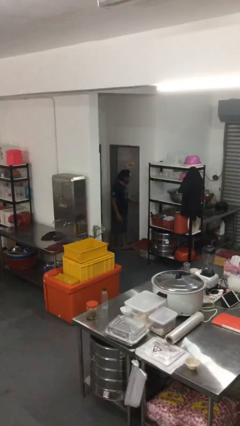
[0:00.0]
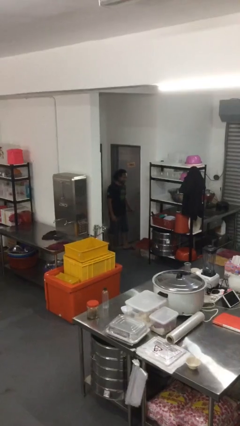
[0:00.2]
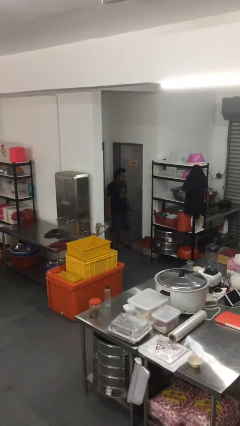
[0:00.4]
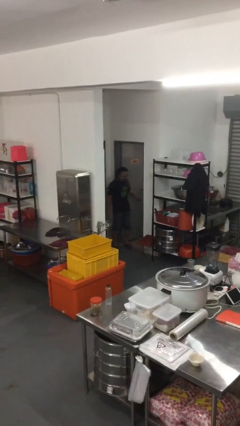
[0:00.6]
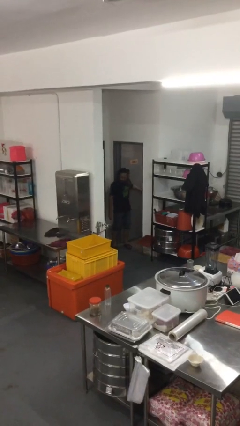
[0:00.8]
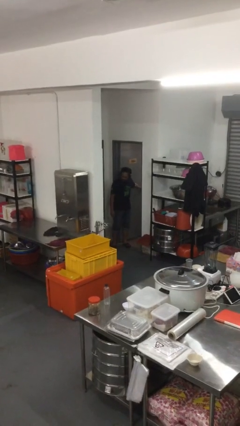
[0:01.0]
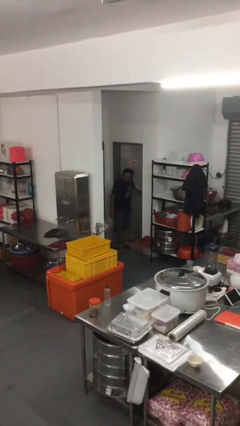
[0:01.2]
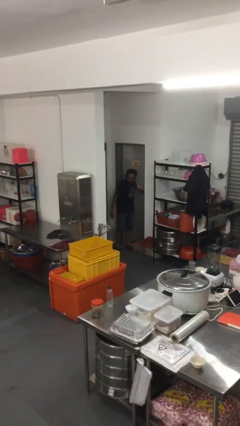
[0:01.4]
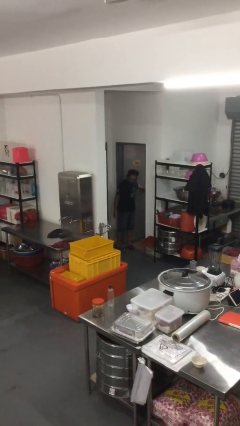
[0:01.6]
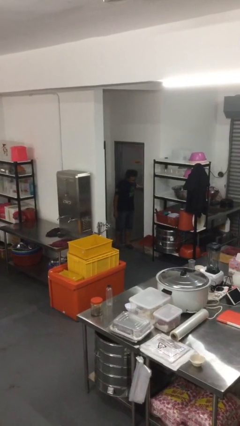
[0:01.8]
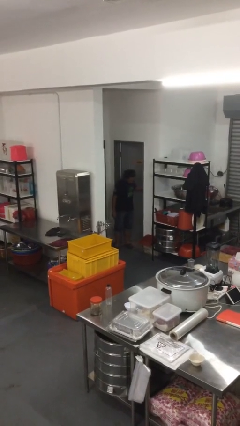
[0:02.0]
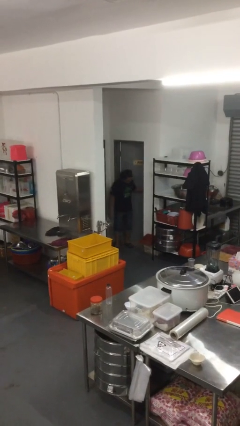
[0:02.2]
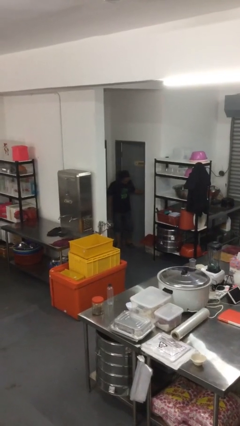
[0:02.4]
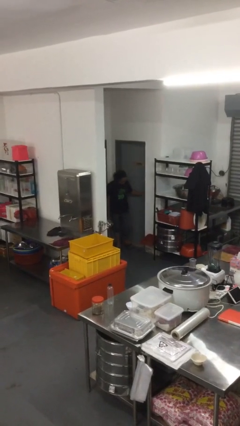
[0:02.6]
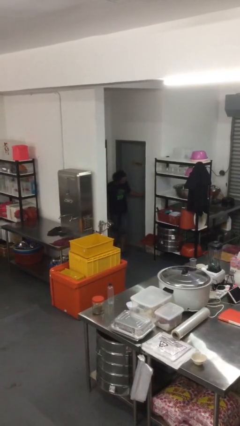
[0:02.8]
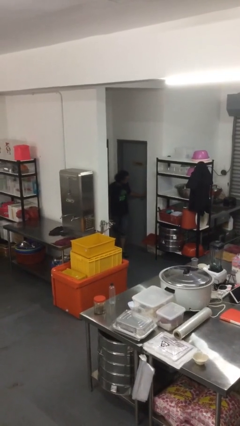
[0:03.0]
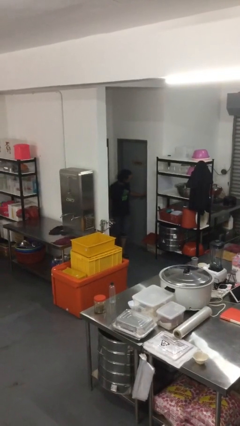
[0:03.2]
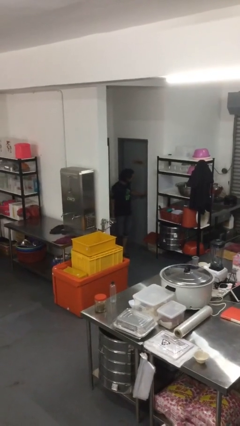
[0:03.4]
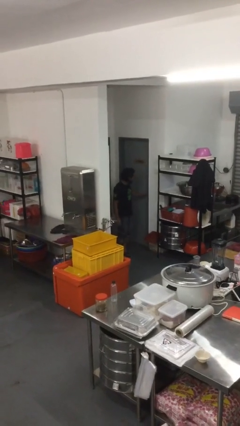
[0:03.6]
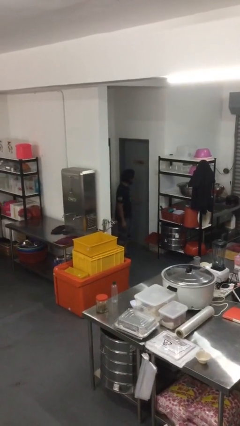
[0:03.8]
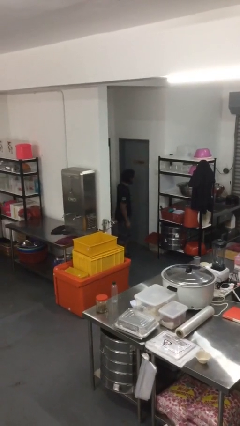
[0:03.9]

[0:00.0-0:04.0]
person closes facility door

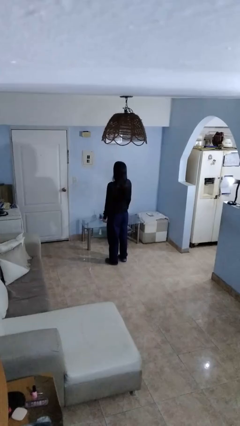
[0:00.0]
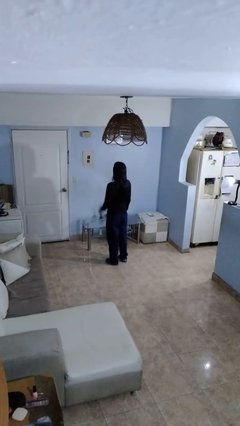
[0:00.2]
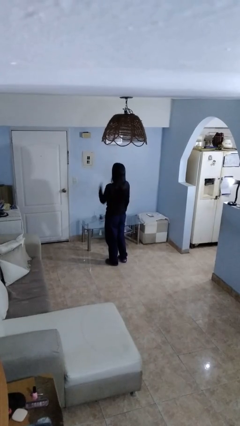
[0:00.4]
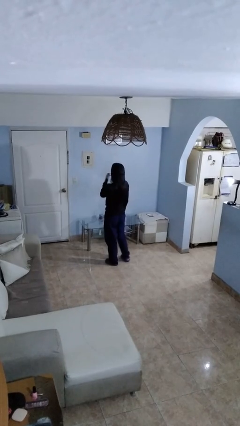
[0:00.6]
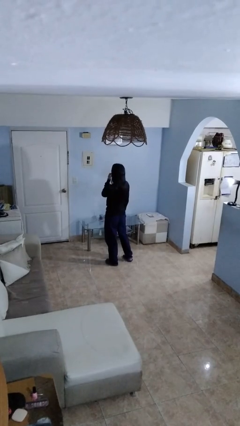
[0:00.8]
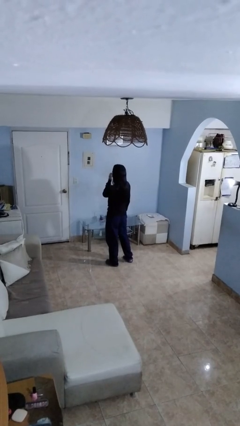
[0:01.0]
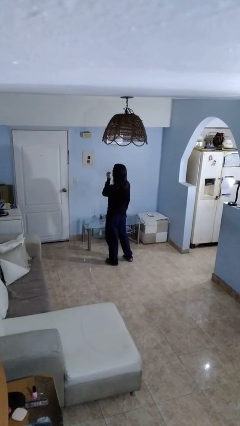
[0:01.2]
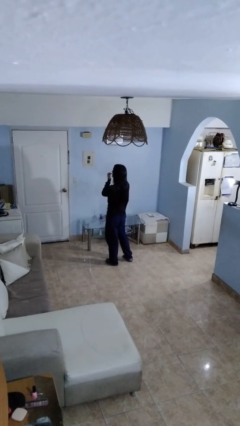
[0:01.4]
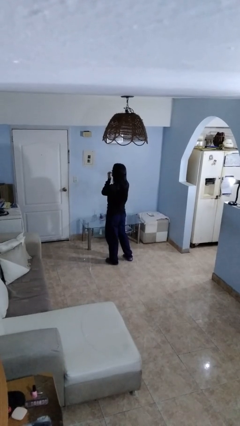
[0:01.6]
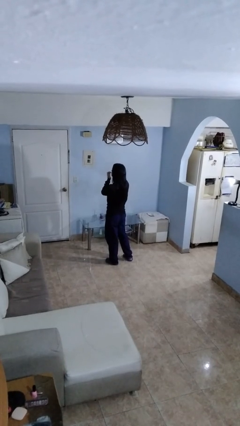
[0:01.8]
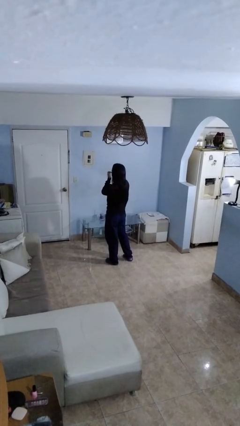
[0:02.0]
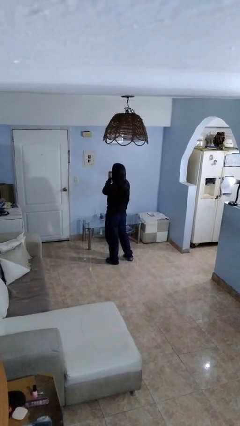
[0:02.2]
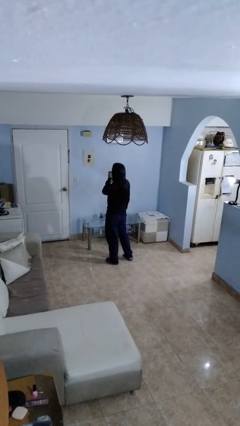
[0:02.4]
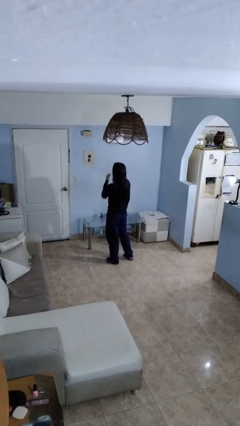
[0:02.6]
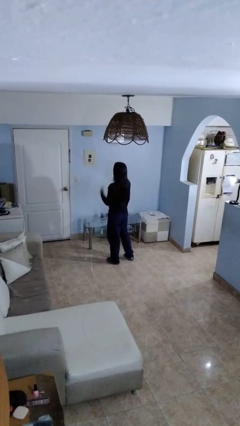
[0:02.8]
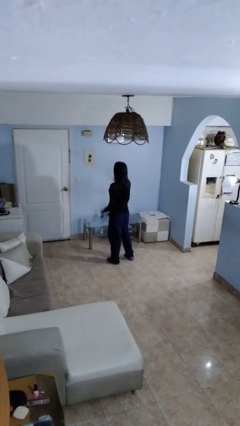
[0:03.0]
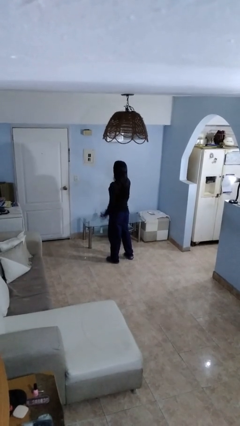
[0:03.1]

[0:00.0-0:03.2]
person licks fingers

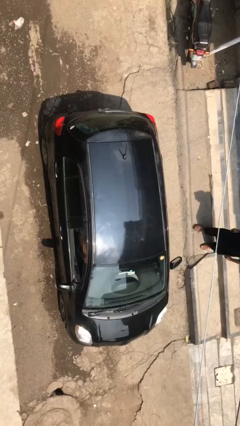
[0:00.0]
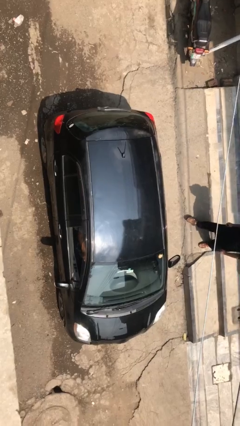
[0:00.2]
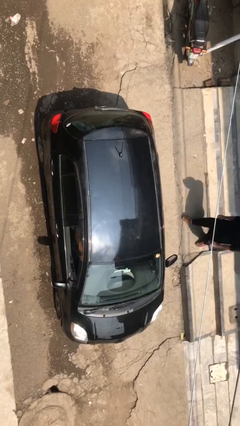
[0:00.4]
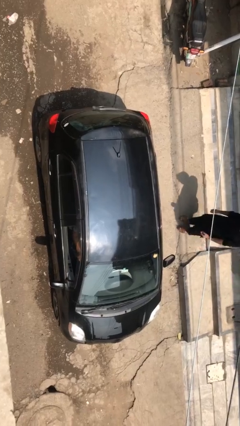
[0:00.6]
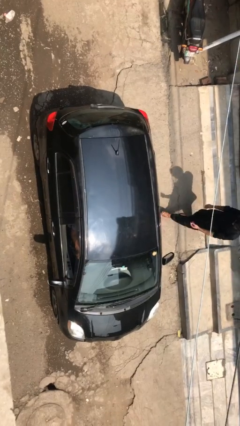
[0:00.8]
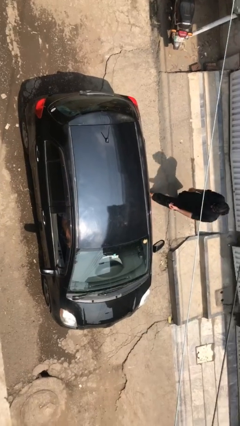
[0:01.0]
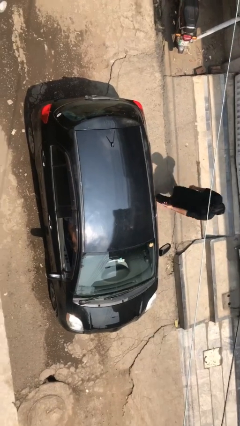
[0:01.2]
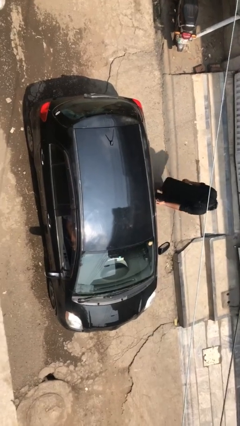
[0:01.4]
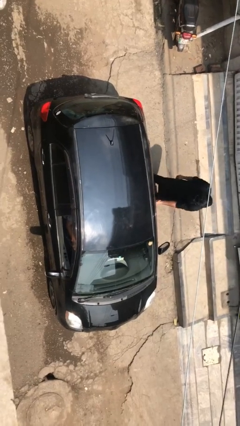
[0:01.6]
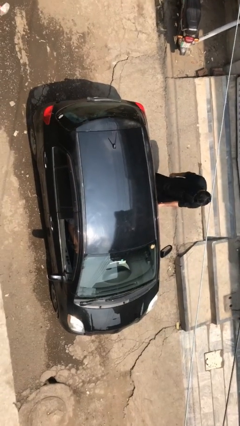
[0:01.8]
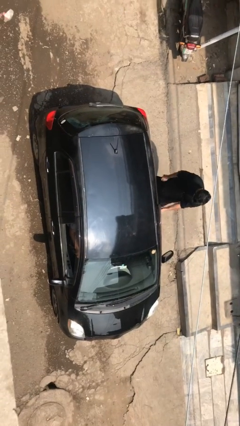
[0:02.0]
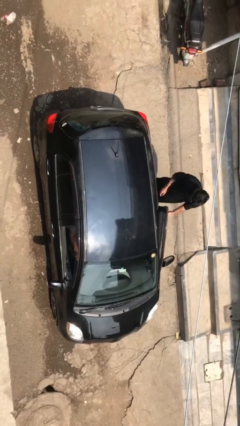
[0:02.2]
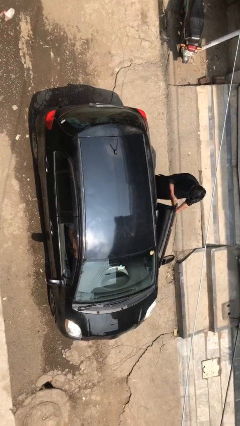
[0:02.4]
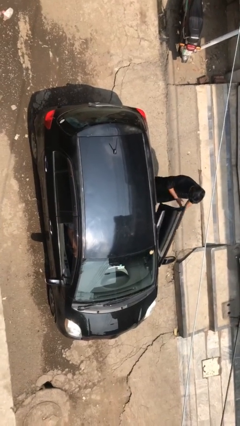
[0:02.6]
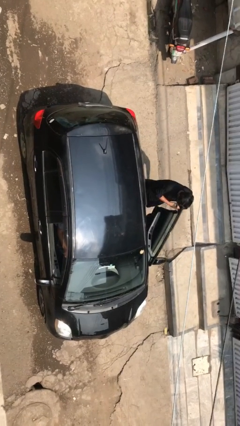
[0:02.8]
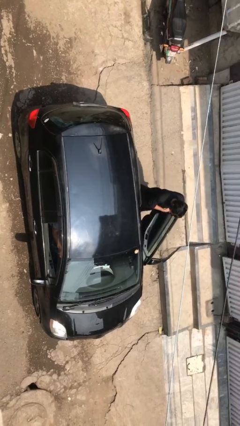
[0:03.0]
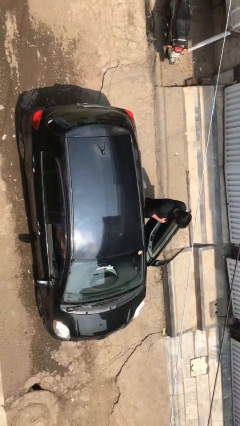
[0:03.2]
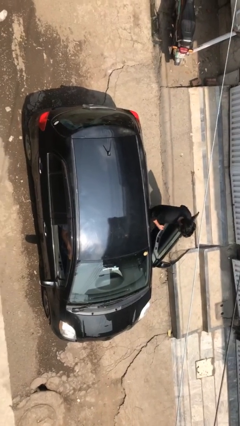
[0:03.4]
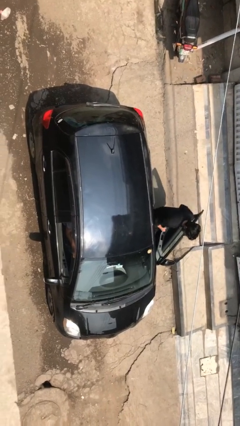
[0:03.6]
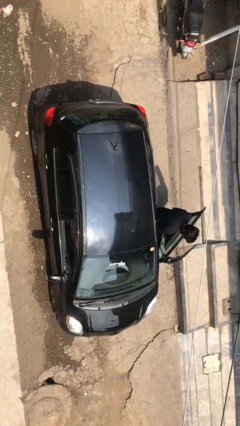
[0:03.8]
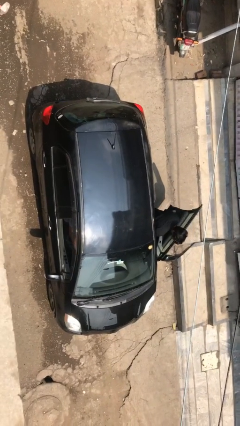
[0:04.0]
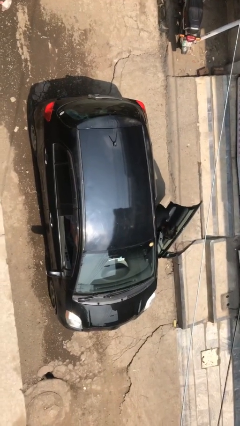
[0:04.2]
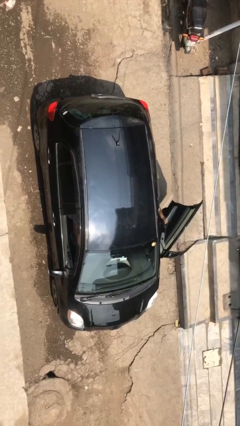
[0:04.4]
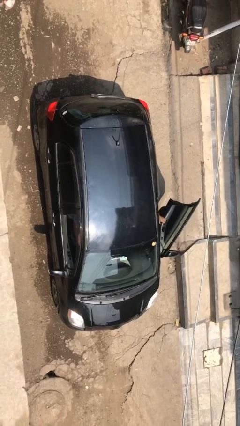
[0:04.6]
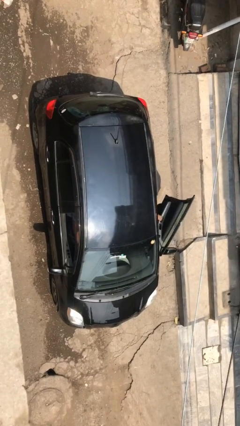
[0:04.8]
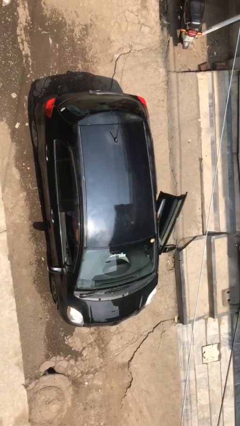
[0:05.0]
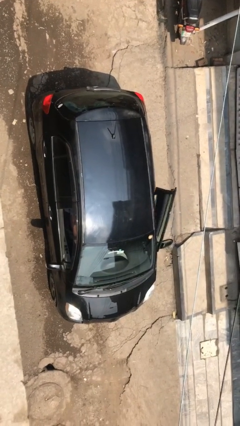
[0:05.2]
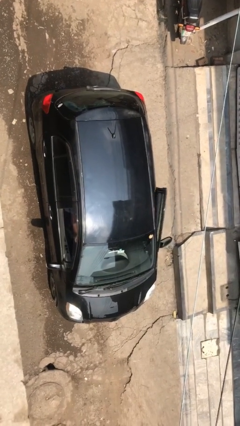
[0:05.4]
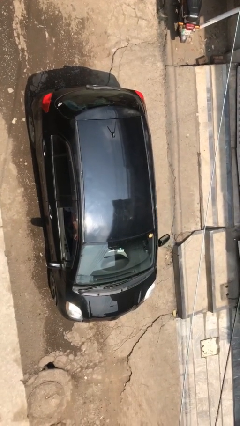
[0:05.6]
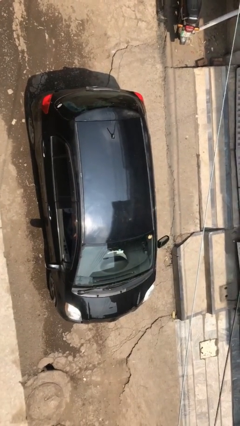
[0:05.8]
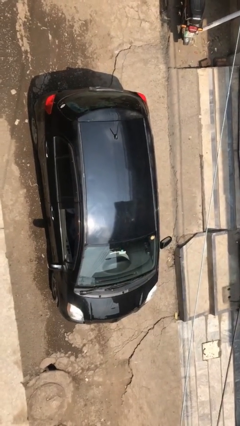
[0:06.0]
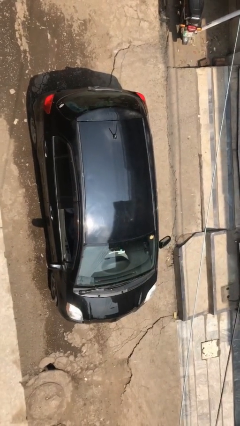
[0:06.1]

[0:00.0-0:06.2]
car picks up person

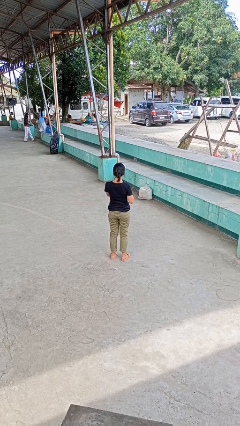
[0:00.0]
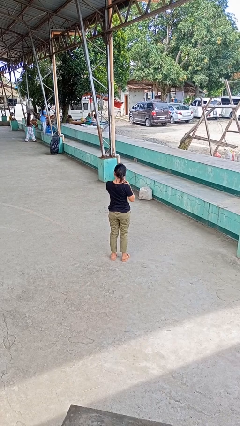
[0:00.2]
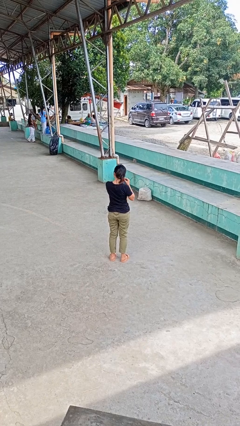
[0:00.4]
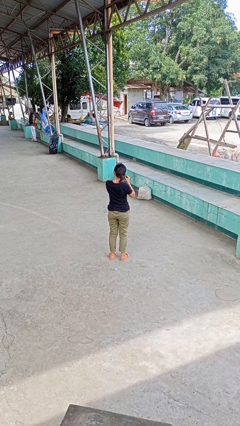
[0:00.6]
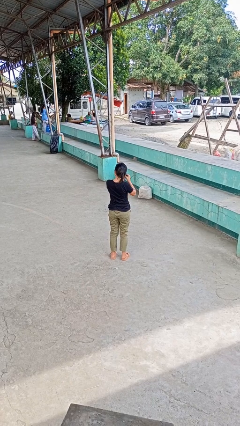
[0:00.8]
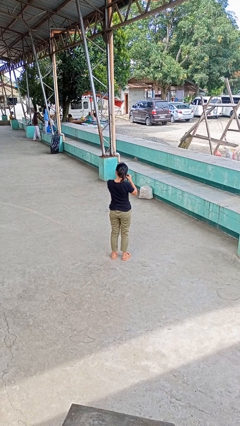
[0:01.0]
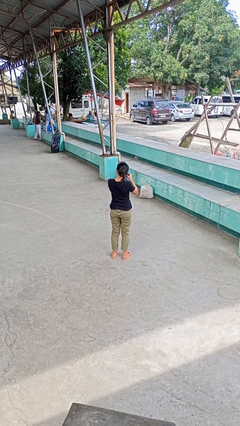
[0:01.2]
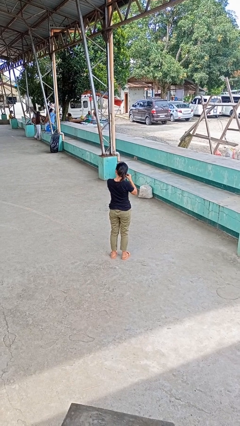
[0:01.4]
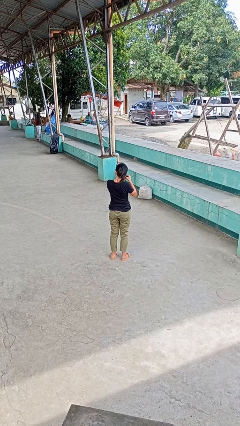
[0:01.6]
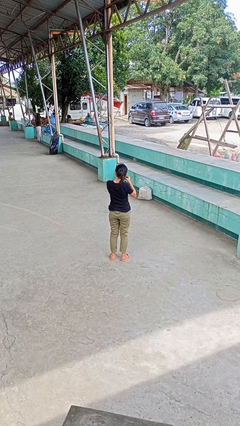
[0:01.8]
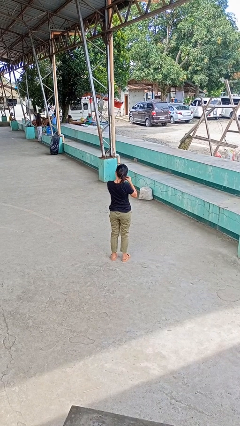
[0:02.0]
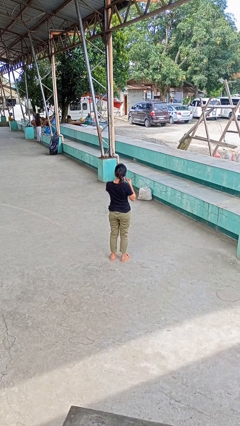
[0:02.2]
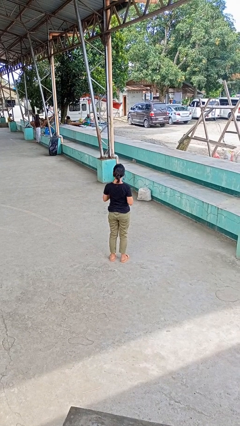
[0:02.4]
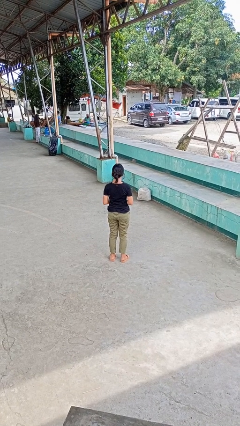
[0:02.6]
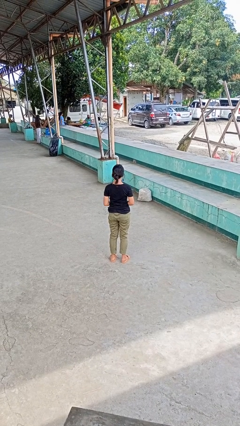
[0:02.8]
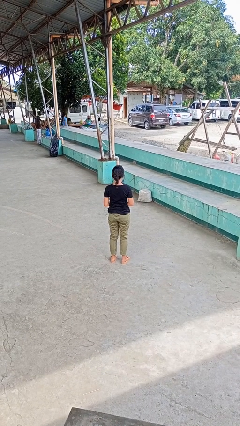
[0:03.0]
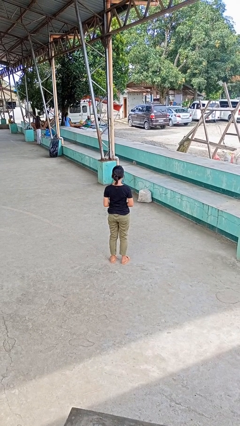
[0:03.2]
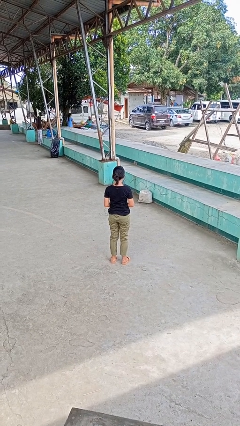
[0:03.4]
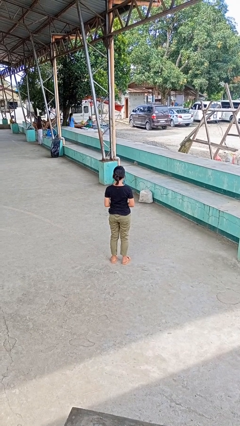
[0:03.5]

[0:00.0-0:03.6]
person puts on earrings

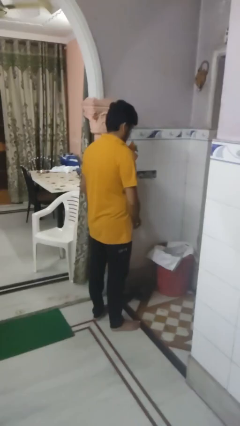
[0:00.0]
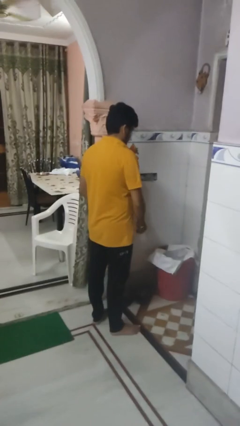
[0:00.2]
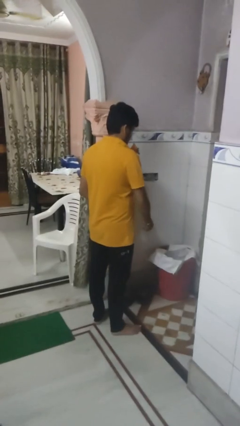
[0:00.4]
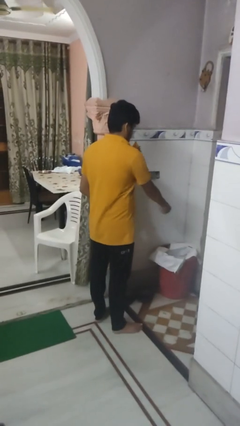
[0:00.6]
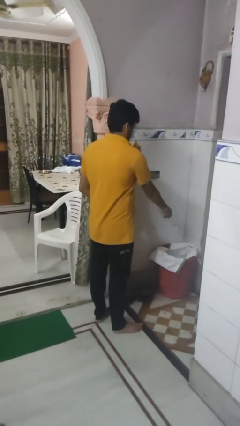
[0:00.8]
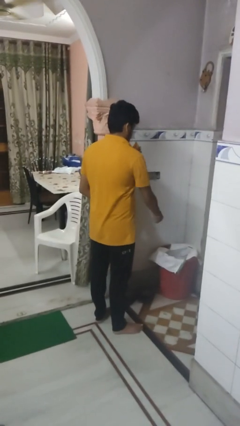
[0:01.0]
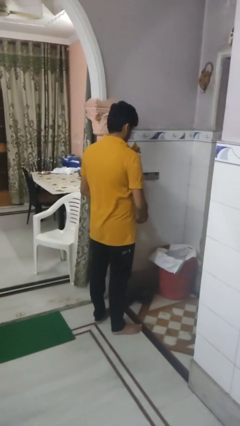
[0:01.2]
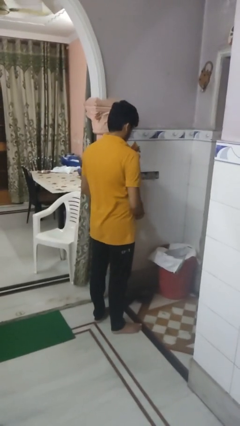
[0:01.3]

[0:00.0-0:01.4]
person discards trash
